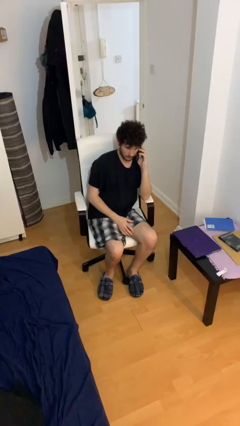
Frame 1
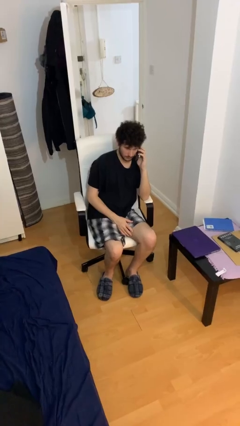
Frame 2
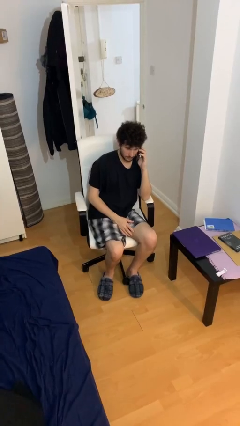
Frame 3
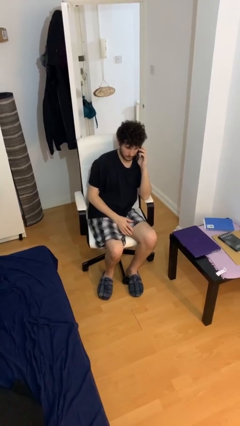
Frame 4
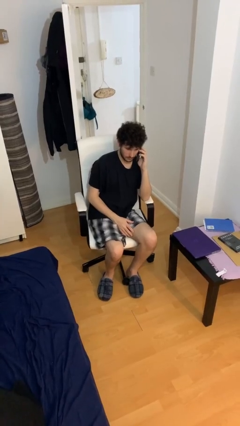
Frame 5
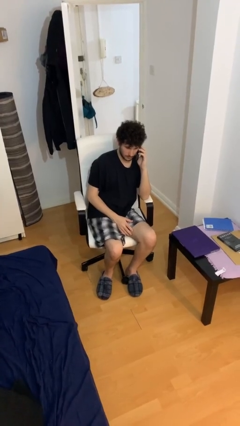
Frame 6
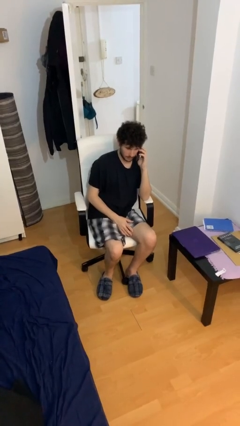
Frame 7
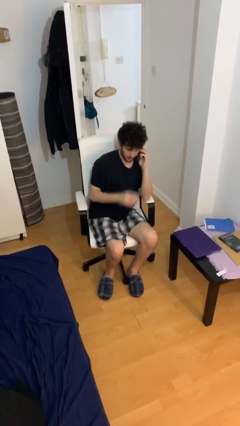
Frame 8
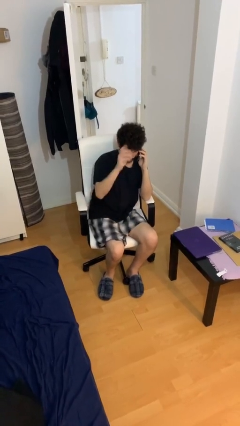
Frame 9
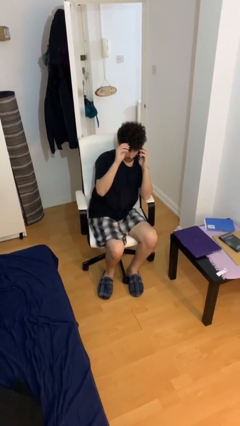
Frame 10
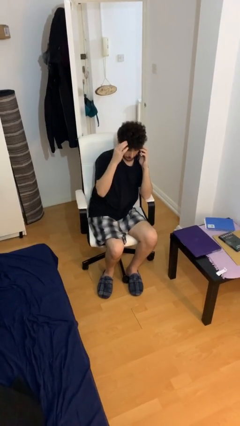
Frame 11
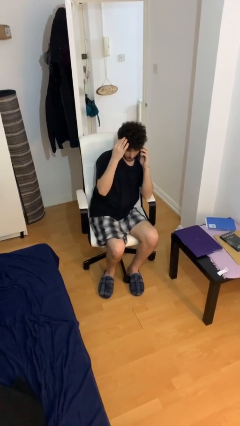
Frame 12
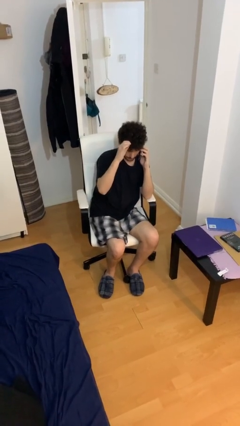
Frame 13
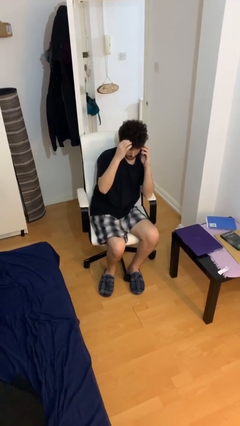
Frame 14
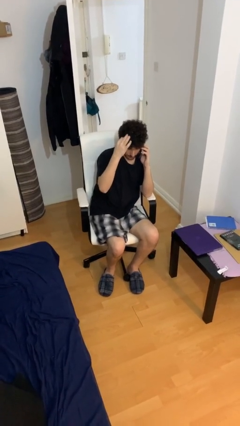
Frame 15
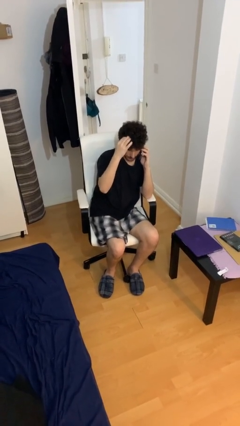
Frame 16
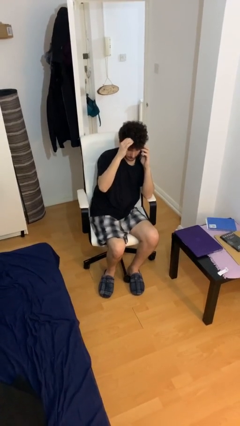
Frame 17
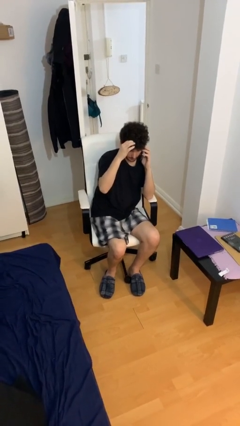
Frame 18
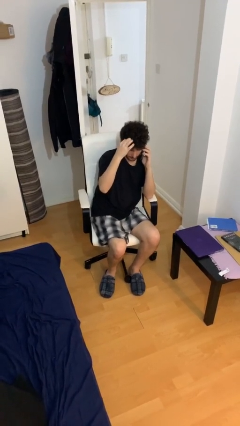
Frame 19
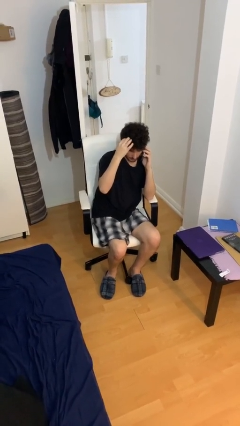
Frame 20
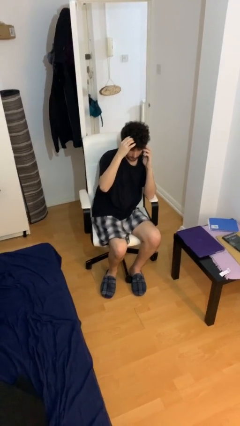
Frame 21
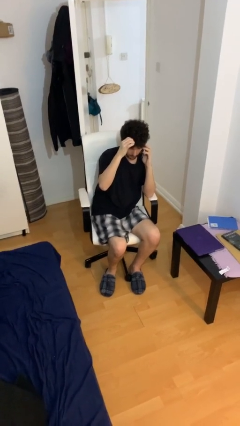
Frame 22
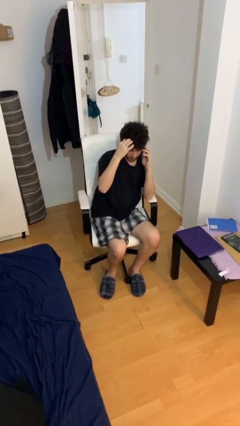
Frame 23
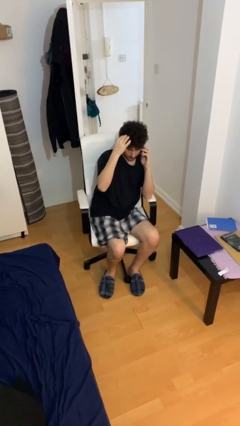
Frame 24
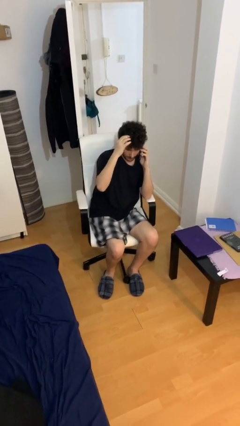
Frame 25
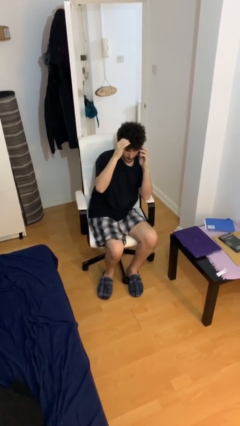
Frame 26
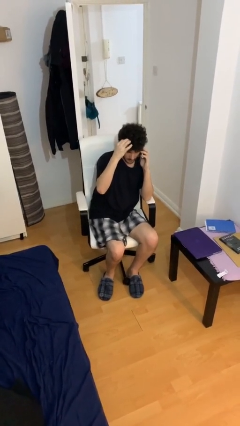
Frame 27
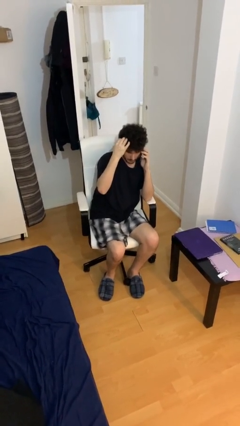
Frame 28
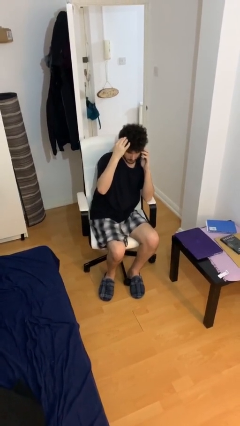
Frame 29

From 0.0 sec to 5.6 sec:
person talks on phone

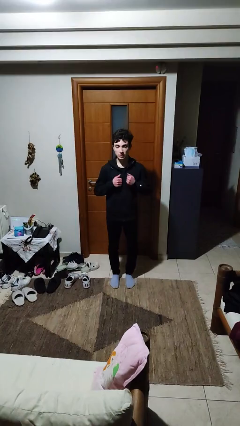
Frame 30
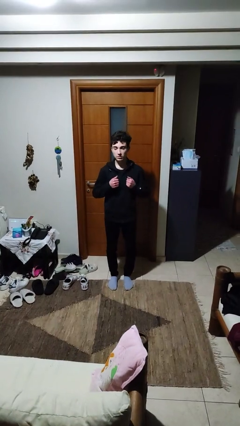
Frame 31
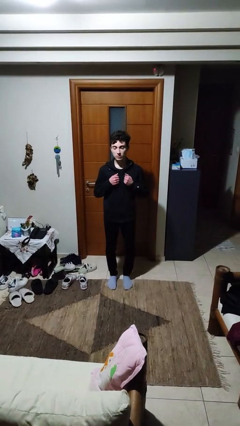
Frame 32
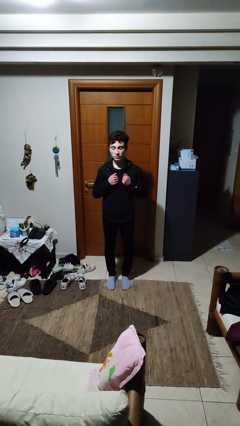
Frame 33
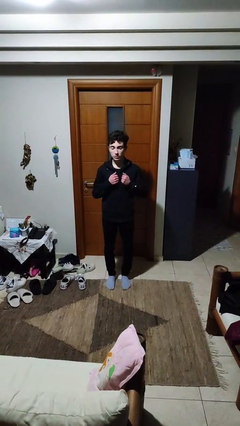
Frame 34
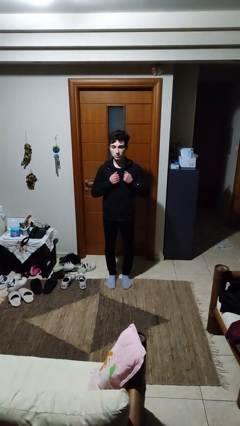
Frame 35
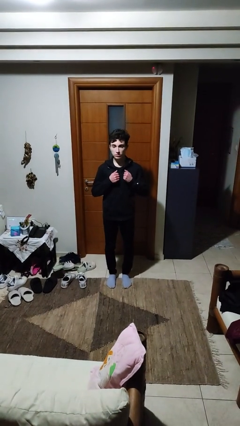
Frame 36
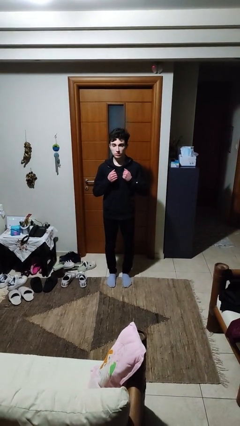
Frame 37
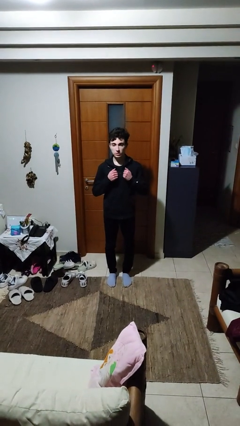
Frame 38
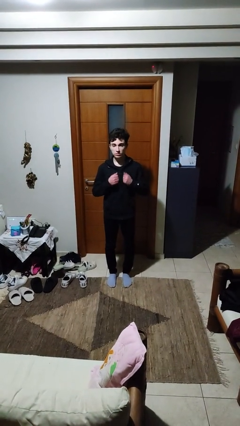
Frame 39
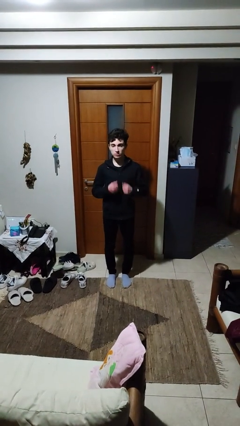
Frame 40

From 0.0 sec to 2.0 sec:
person drums on chest

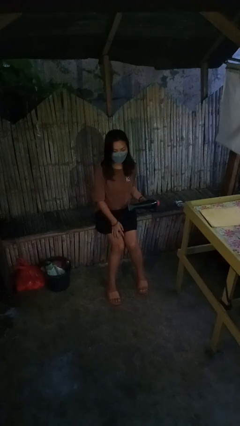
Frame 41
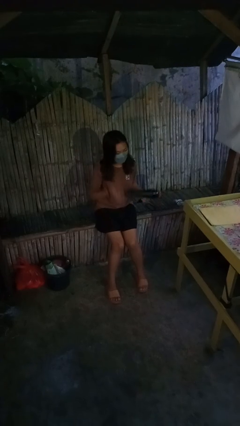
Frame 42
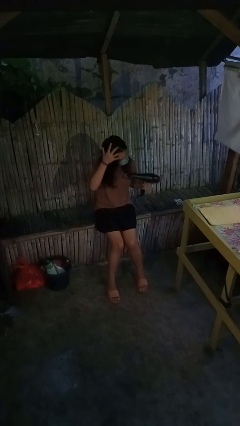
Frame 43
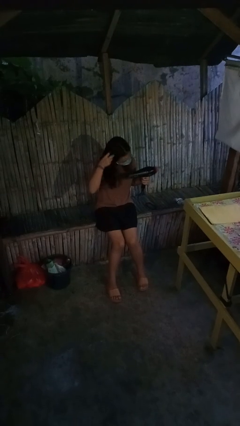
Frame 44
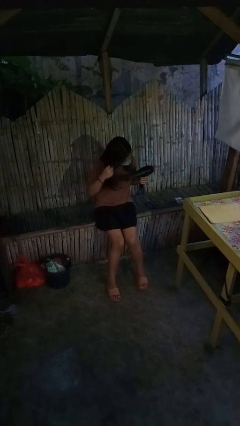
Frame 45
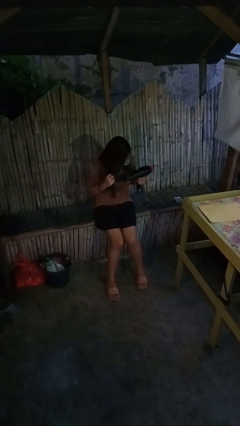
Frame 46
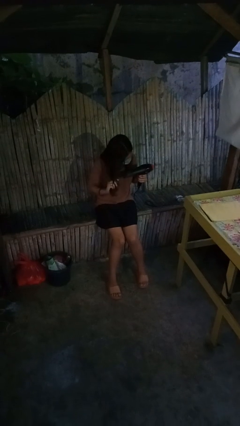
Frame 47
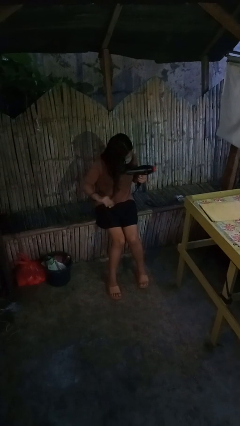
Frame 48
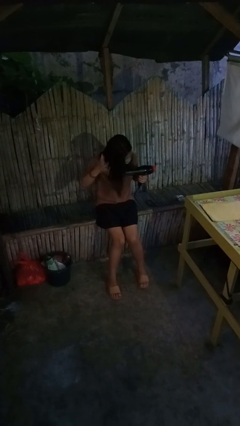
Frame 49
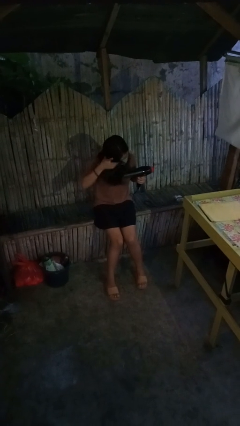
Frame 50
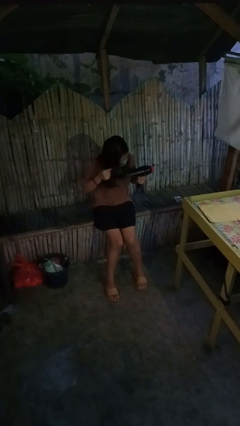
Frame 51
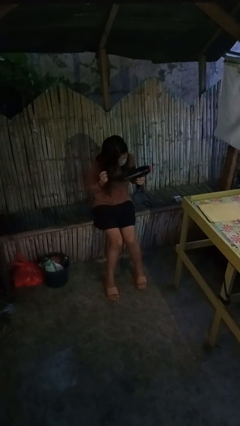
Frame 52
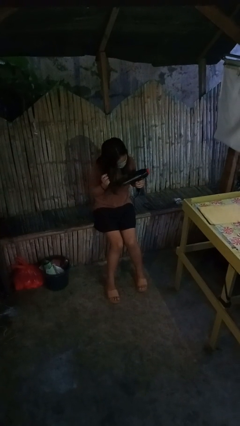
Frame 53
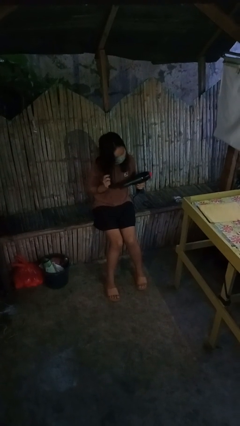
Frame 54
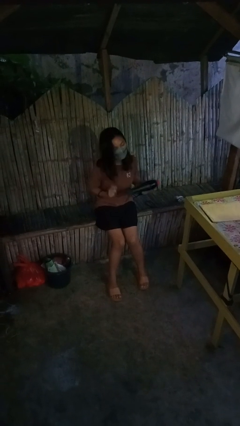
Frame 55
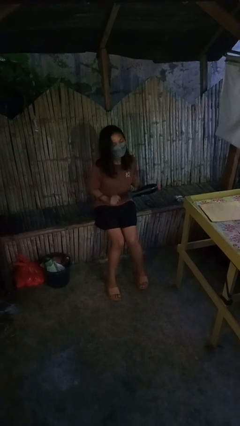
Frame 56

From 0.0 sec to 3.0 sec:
person dries hair with hairdryer

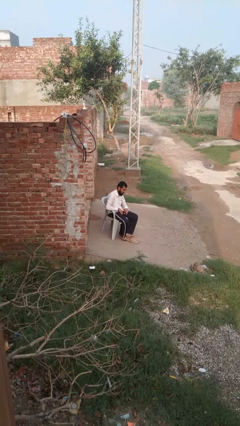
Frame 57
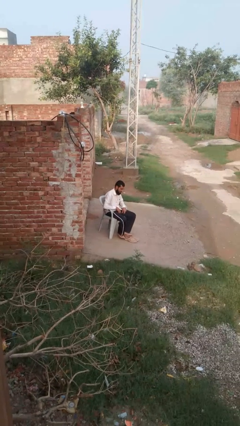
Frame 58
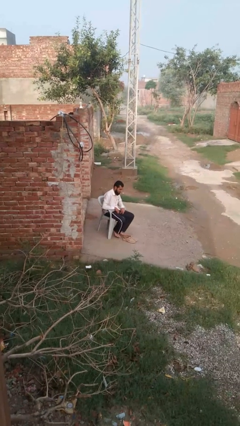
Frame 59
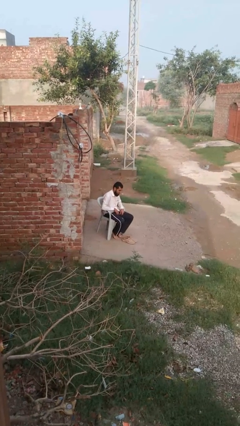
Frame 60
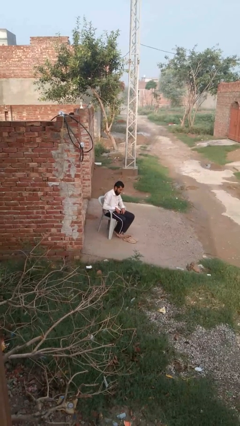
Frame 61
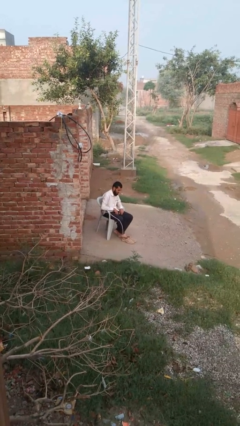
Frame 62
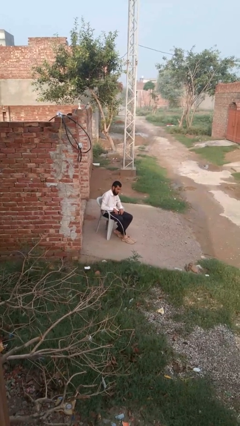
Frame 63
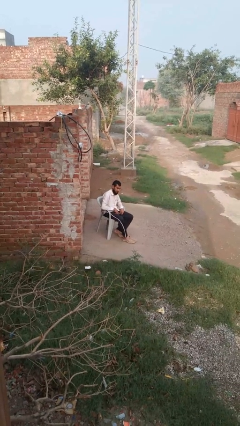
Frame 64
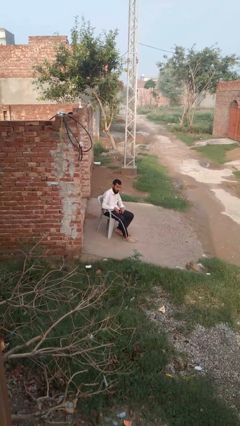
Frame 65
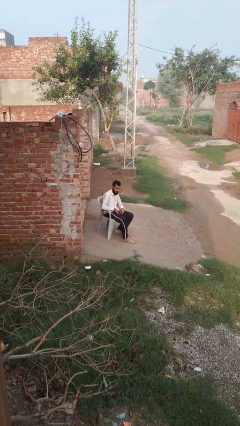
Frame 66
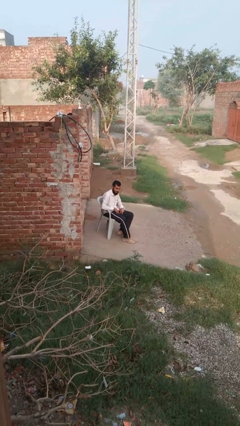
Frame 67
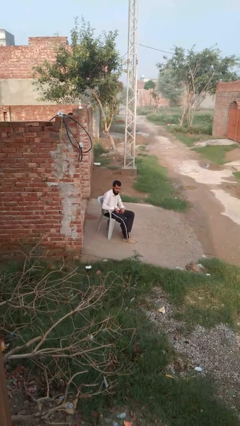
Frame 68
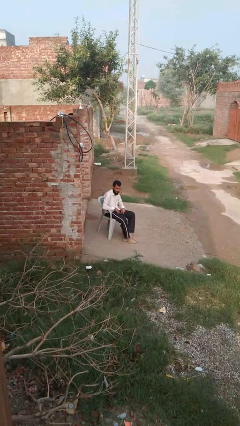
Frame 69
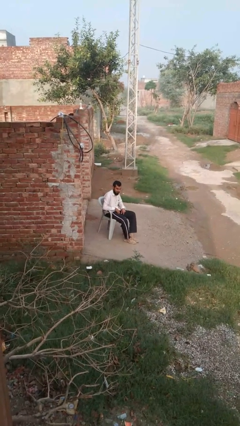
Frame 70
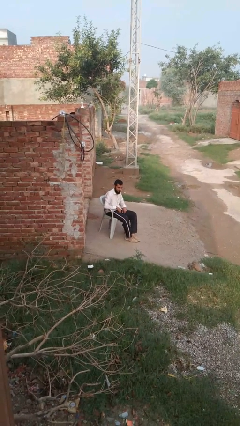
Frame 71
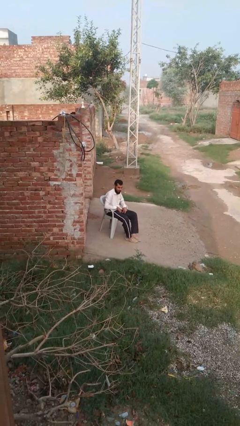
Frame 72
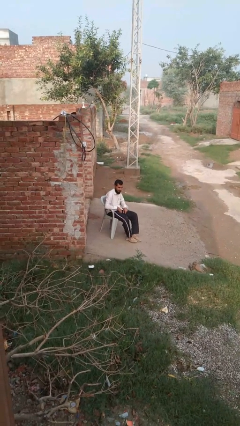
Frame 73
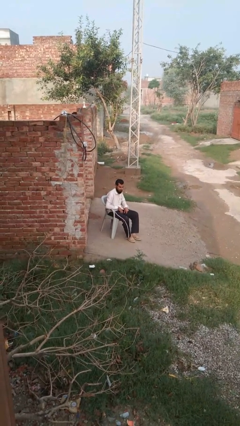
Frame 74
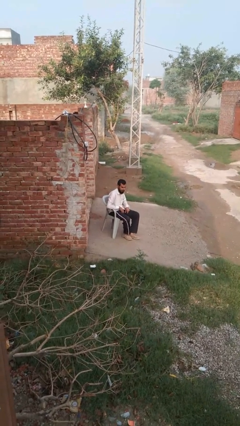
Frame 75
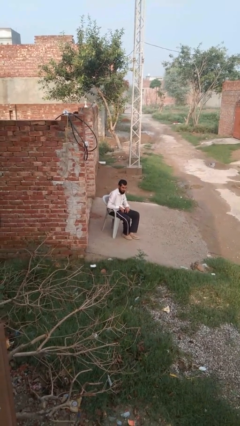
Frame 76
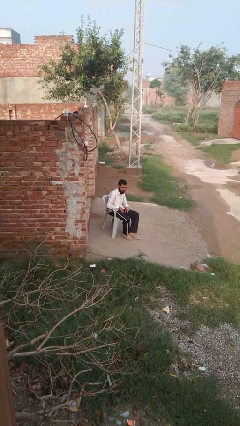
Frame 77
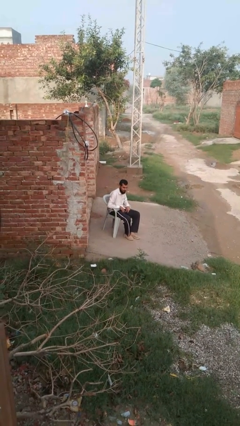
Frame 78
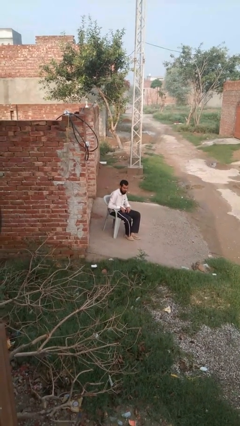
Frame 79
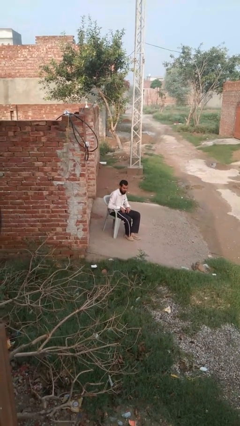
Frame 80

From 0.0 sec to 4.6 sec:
person puts on shoes

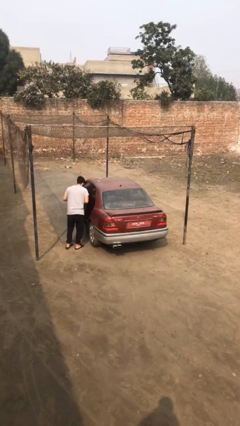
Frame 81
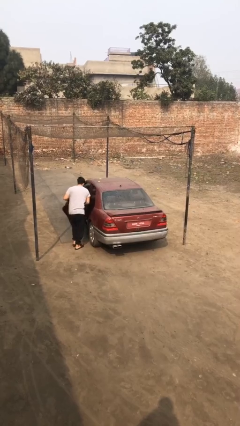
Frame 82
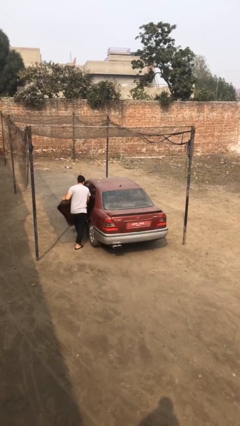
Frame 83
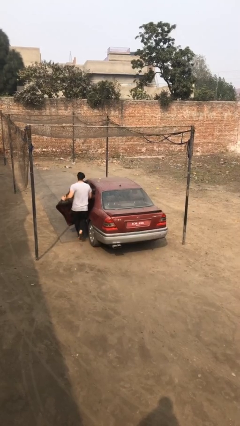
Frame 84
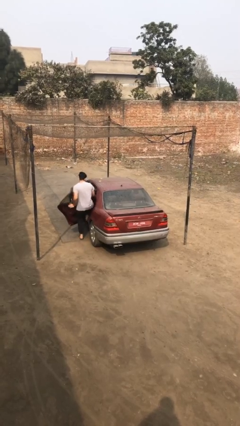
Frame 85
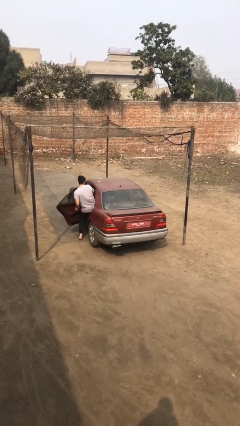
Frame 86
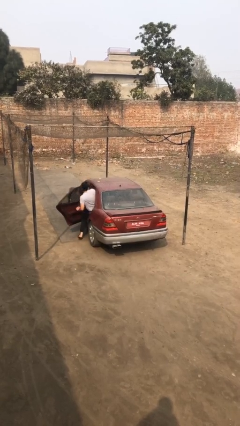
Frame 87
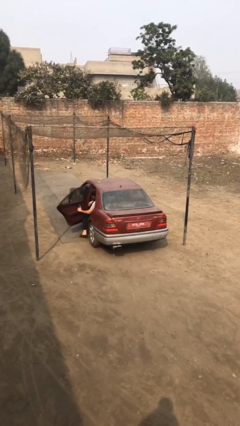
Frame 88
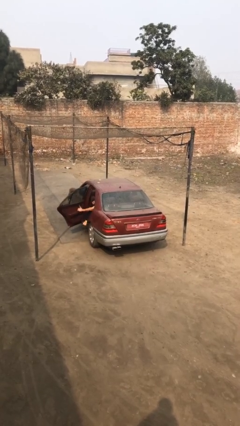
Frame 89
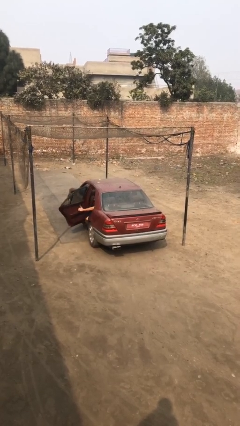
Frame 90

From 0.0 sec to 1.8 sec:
car picks up person

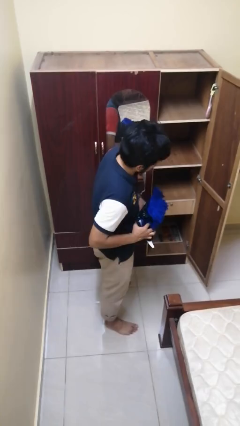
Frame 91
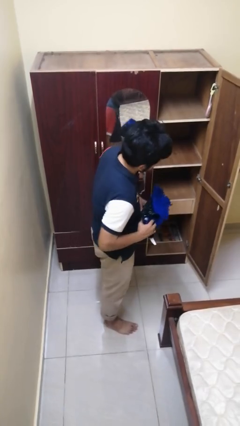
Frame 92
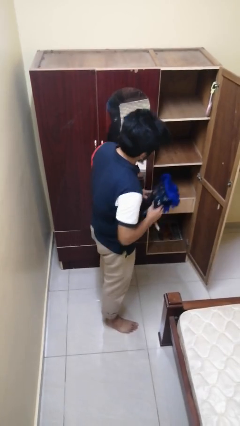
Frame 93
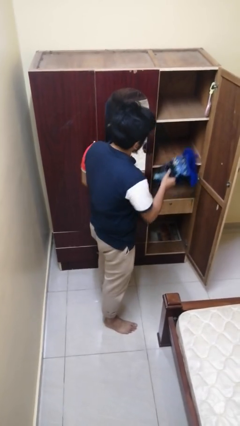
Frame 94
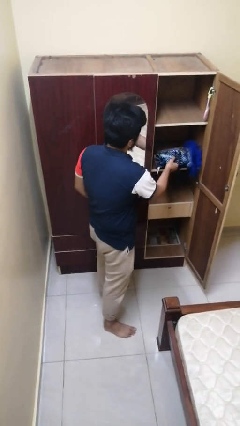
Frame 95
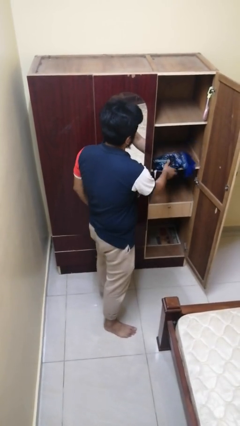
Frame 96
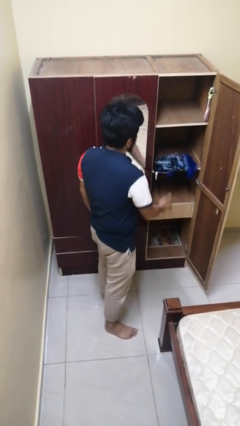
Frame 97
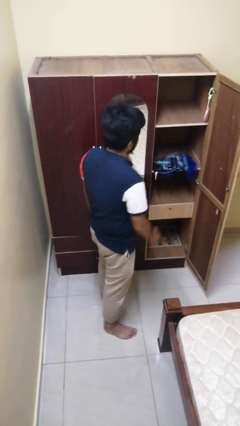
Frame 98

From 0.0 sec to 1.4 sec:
person puts down object into cabinet
